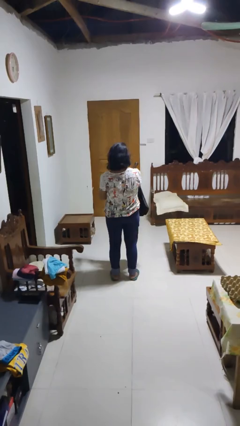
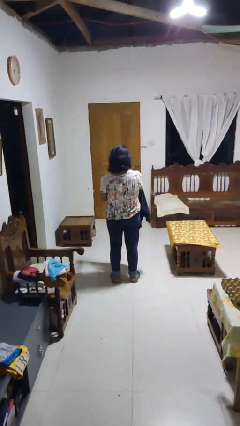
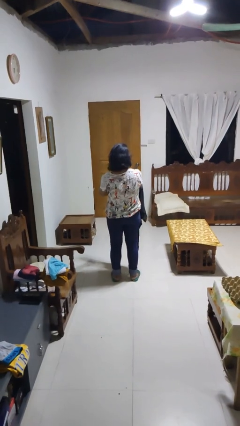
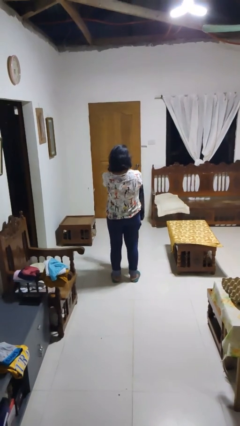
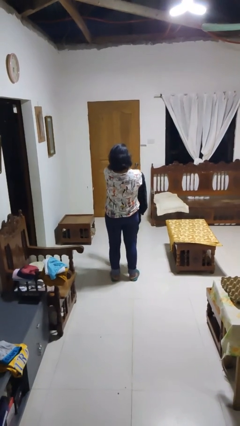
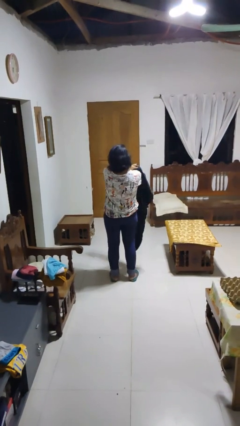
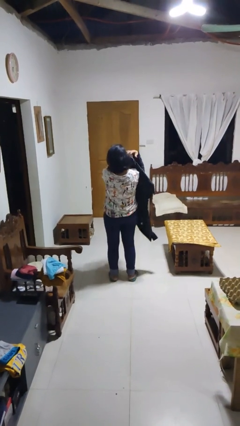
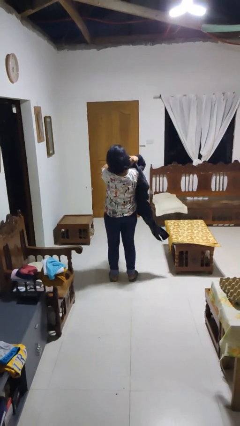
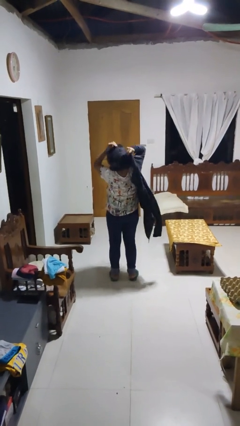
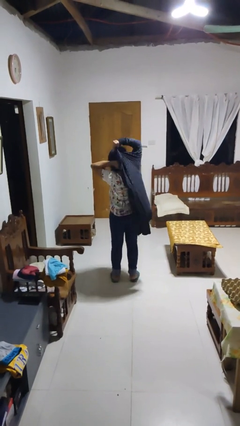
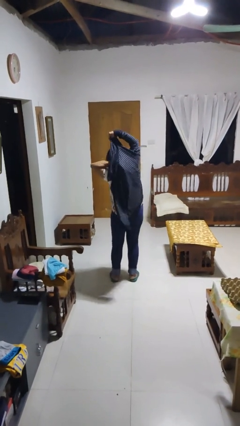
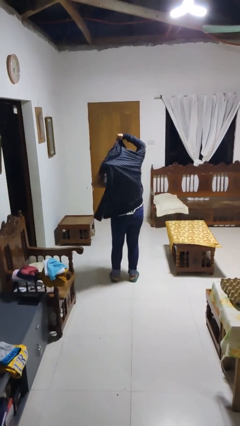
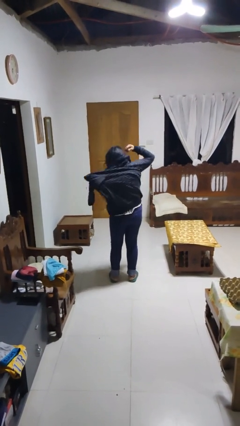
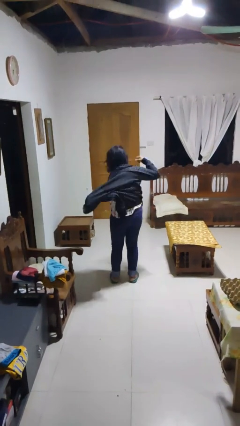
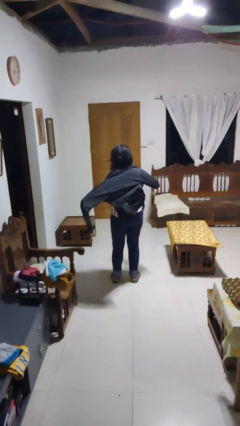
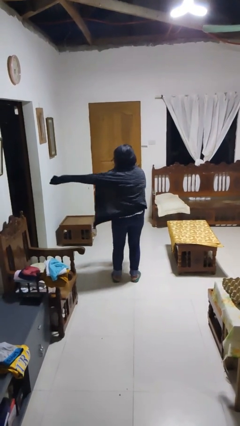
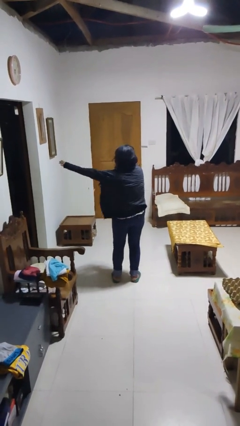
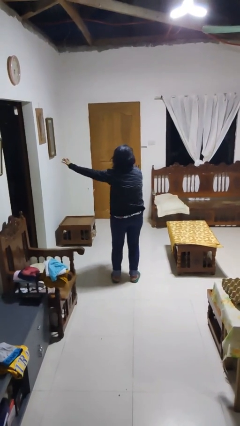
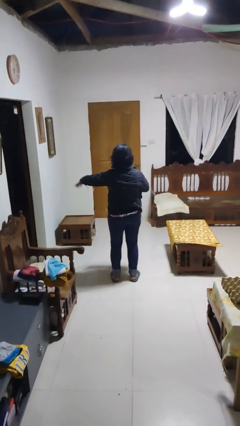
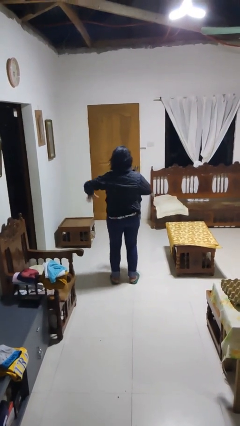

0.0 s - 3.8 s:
person puts on jacket

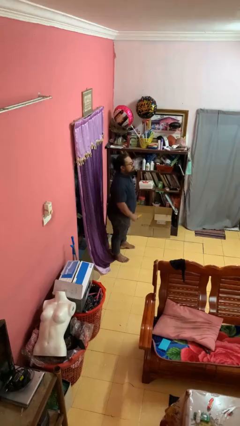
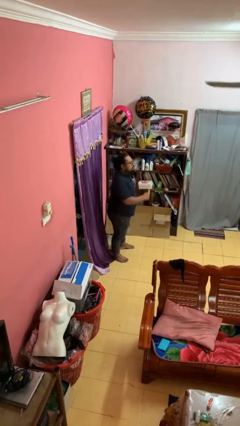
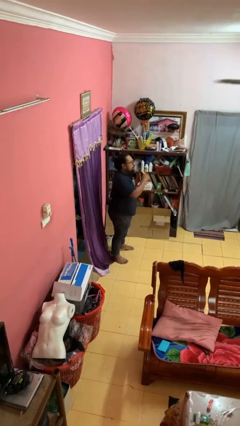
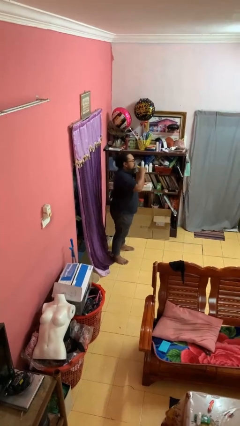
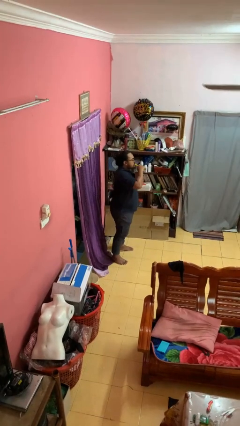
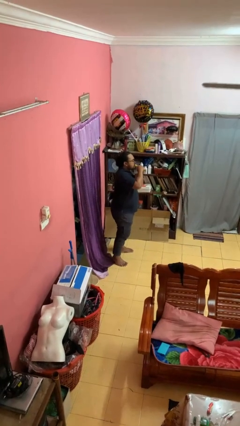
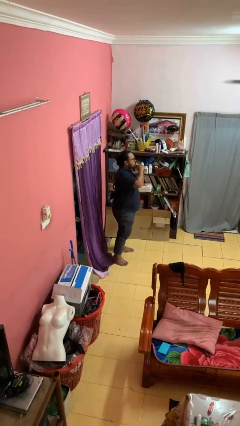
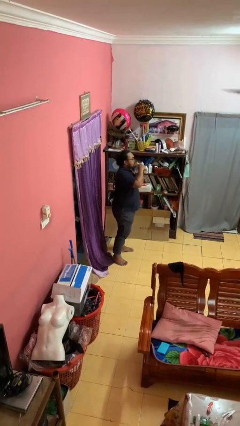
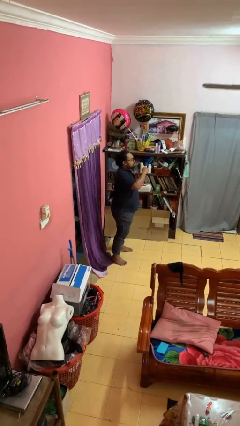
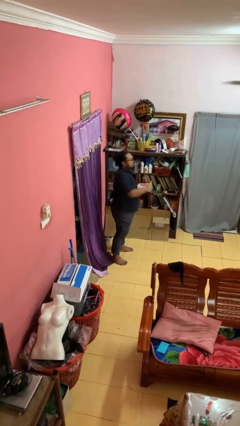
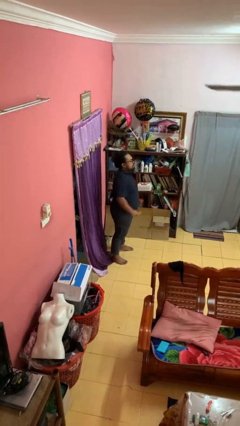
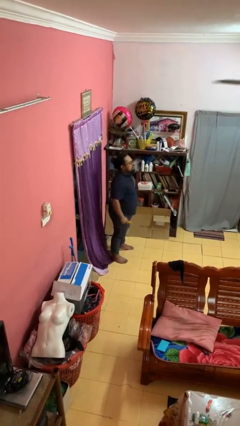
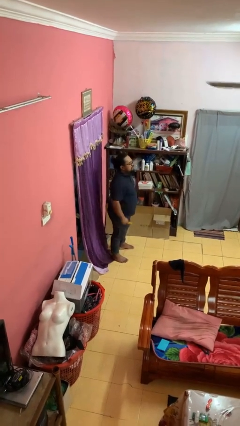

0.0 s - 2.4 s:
person eats banana

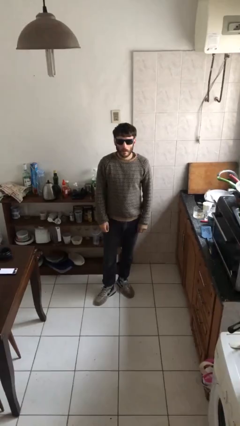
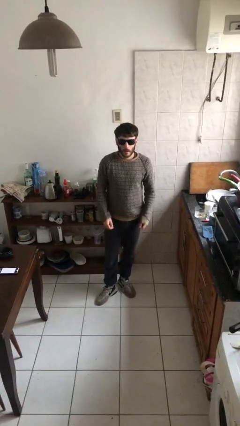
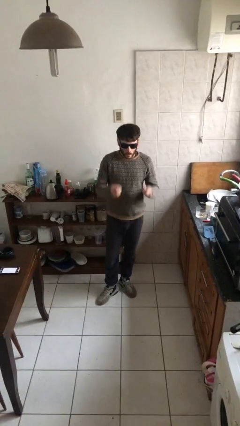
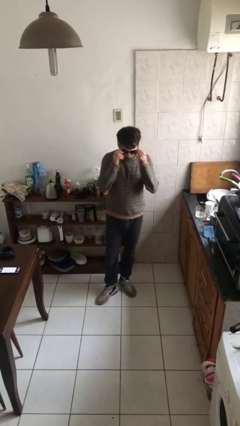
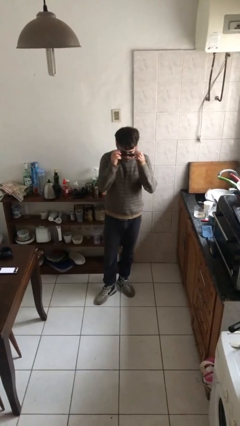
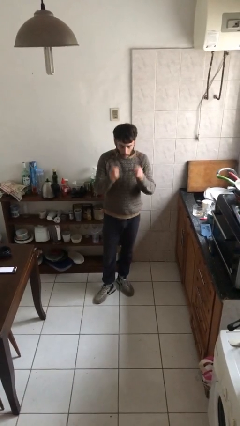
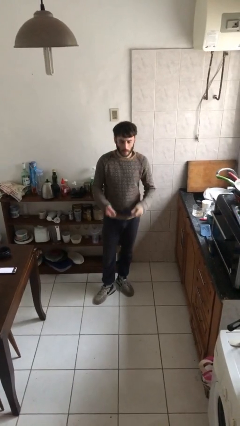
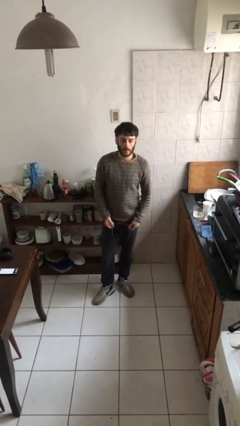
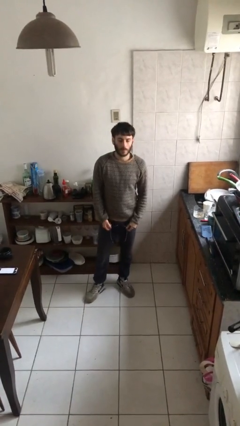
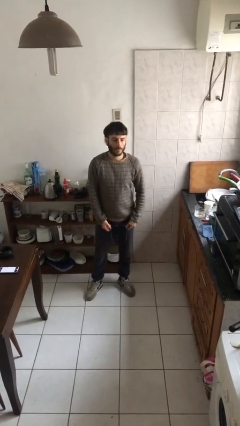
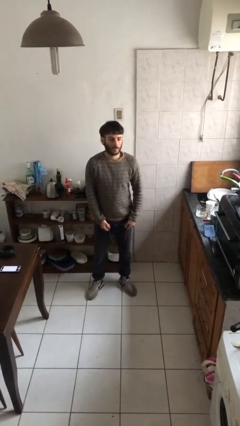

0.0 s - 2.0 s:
person takes off sunglasses

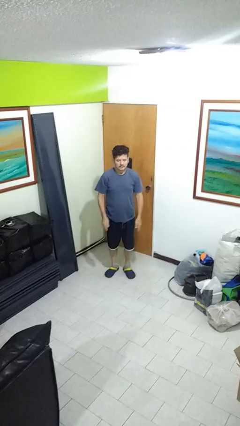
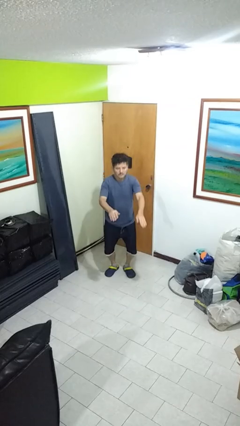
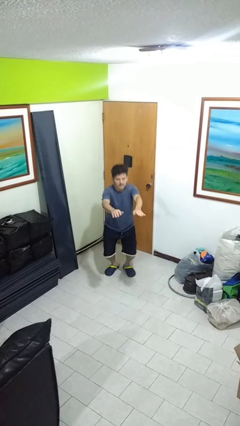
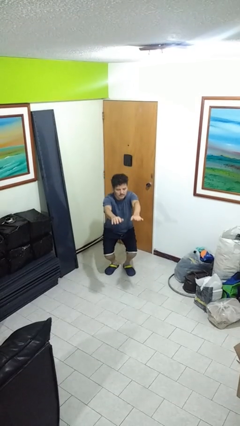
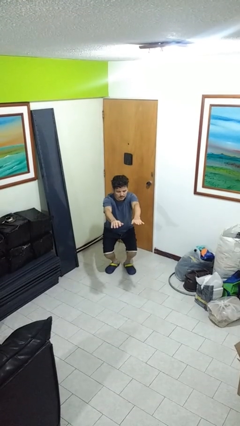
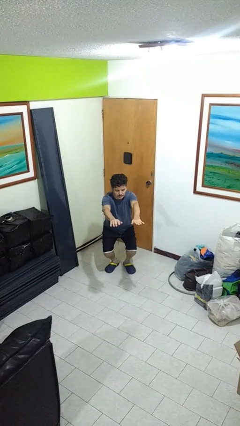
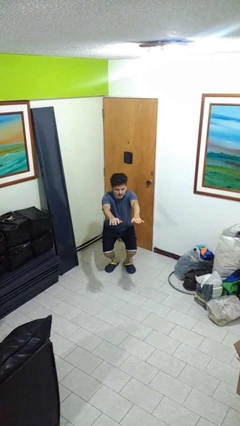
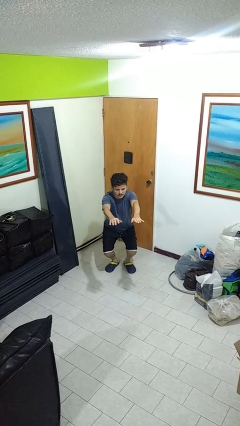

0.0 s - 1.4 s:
person squats

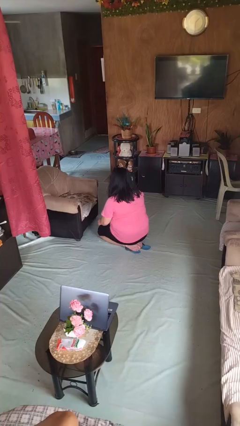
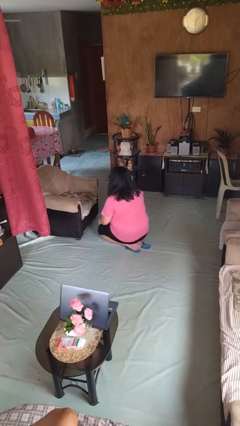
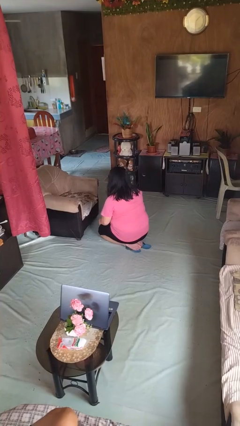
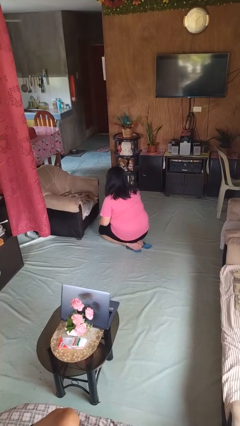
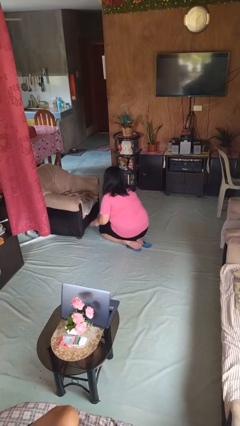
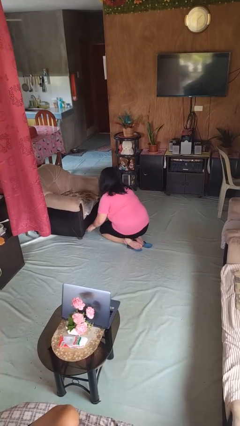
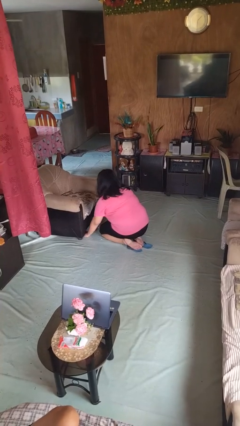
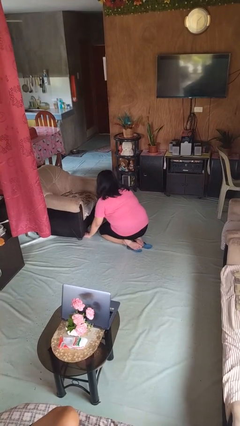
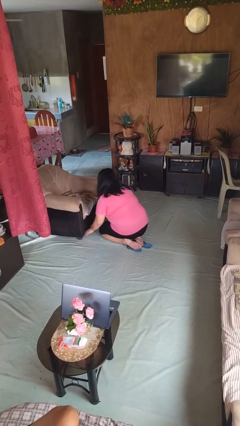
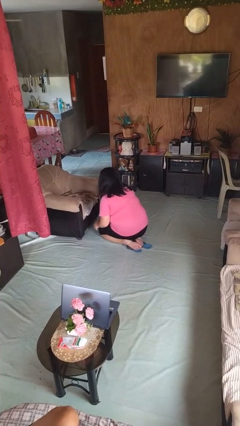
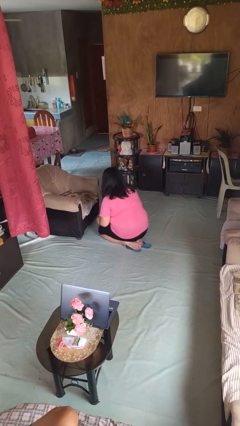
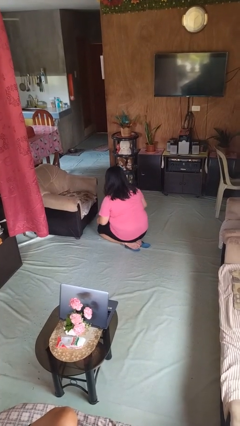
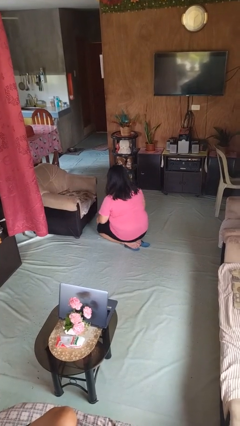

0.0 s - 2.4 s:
person searches under couch

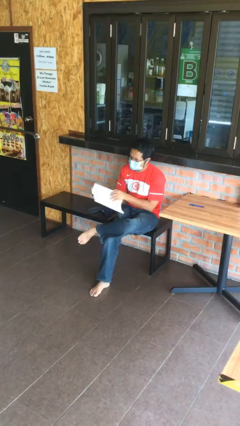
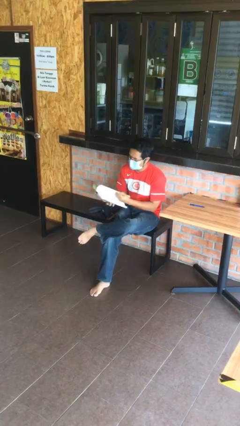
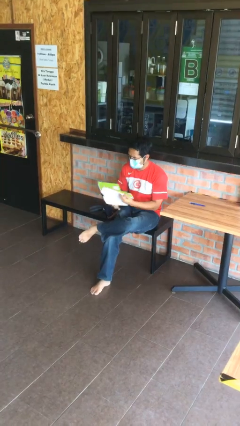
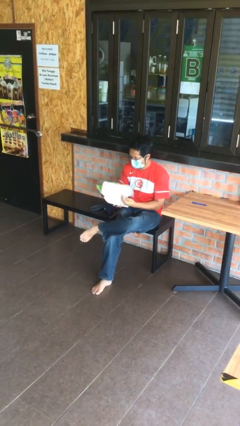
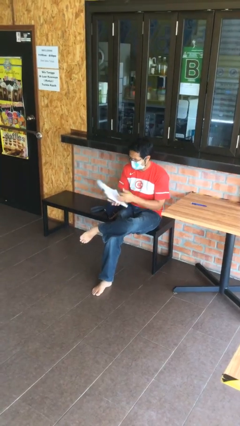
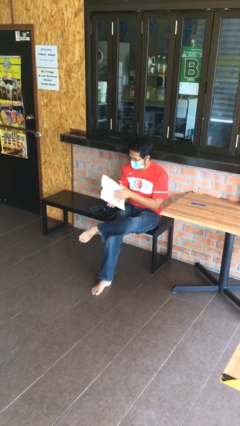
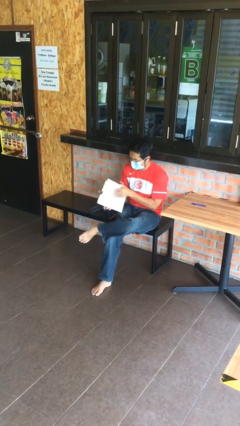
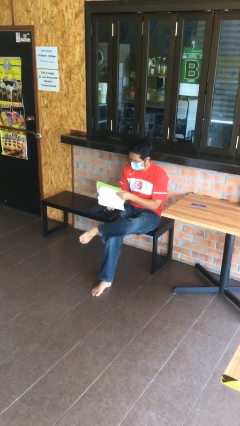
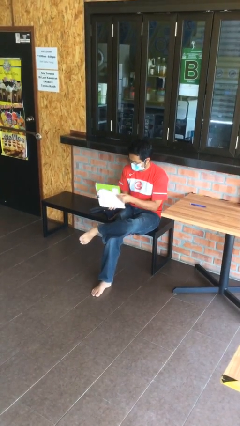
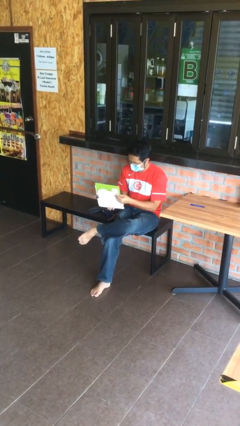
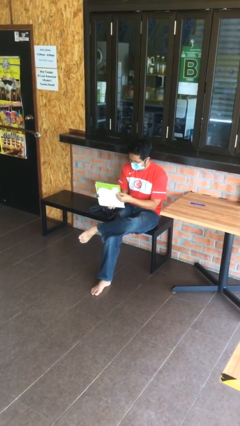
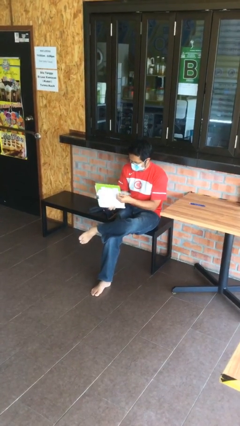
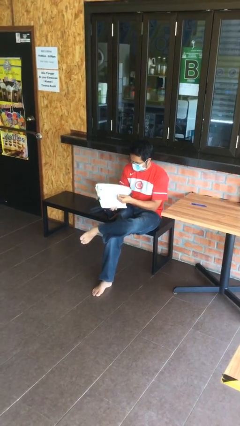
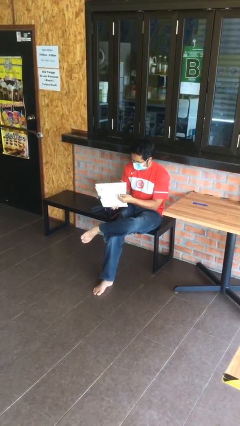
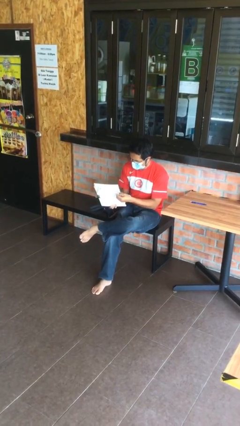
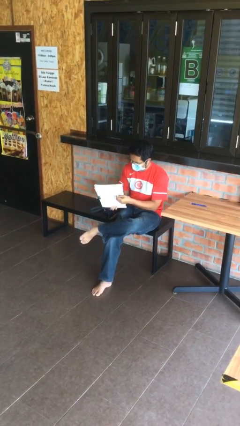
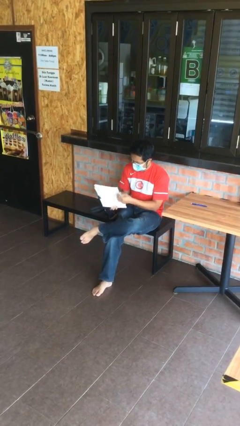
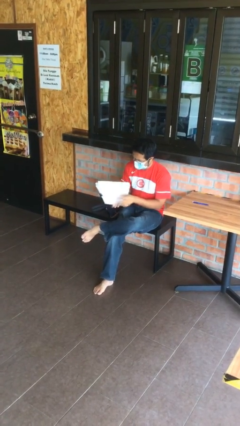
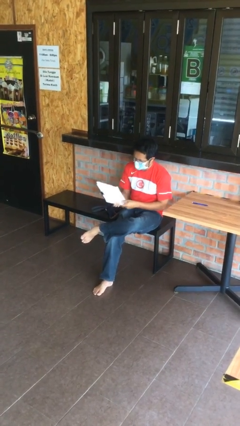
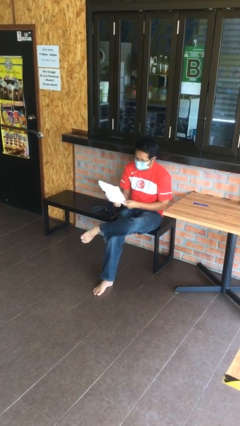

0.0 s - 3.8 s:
person reads document

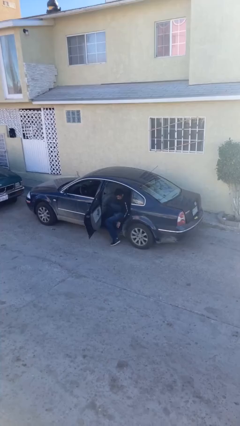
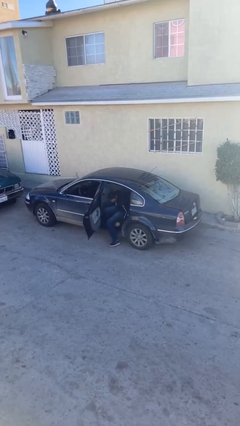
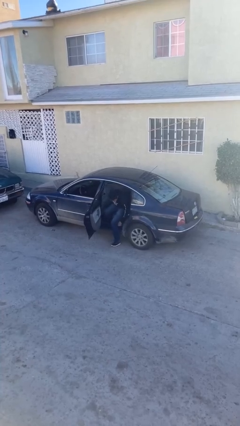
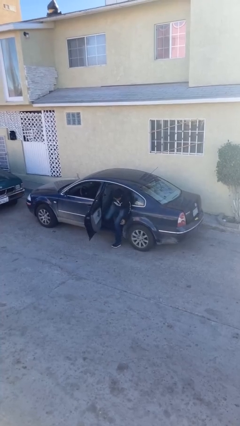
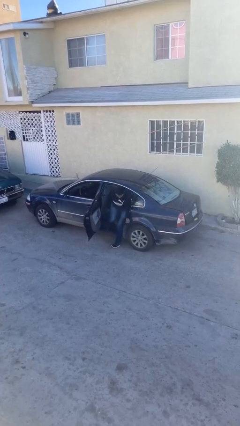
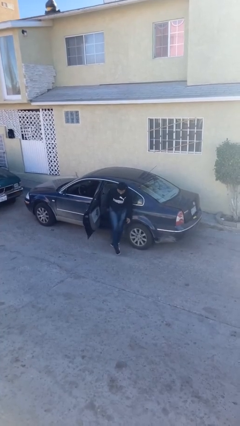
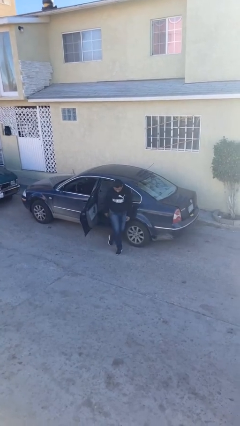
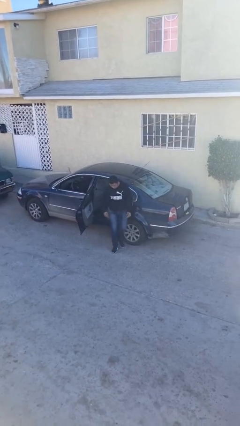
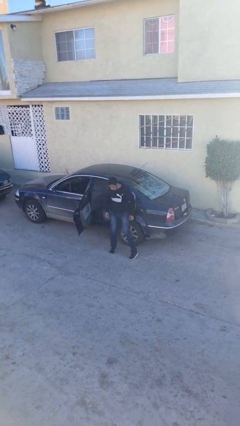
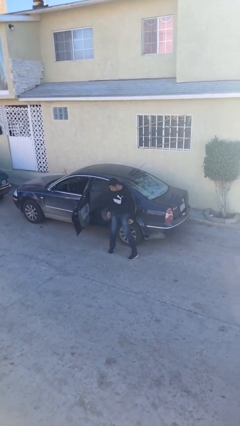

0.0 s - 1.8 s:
person exits car
